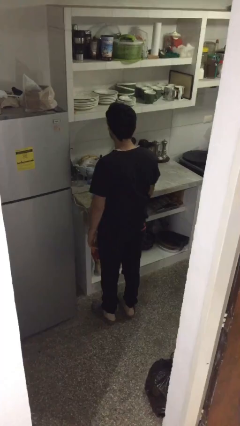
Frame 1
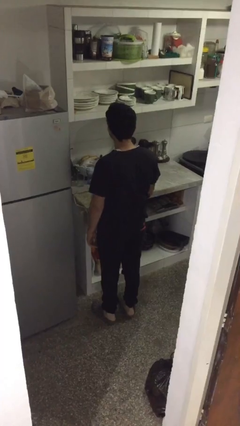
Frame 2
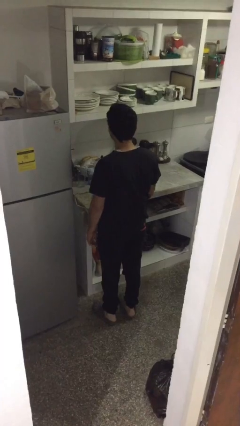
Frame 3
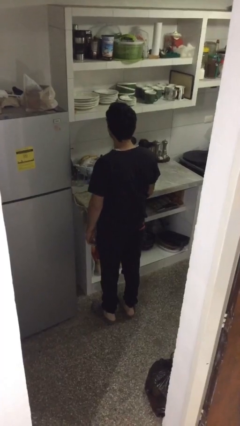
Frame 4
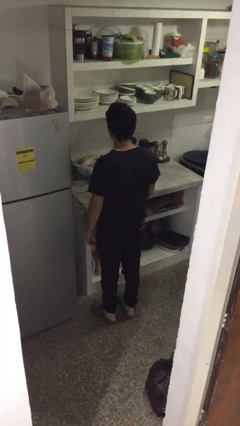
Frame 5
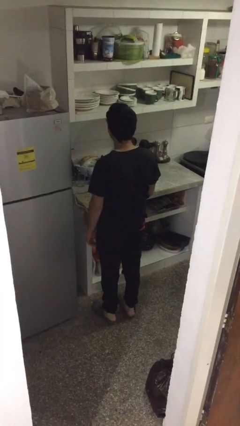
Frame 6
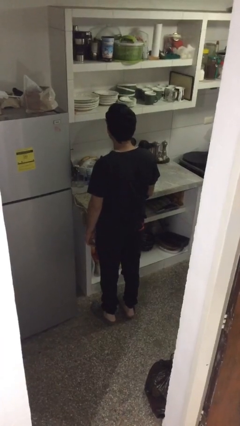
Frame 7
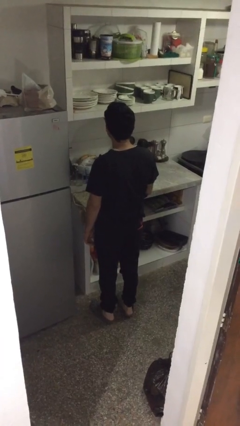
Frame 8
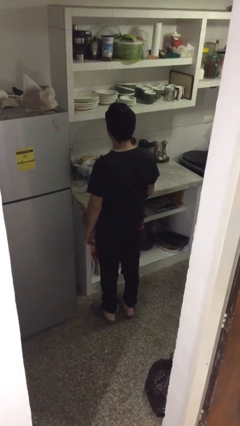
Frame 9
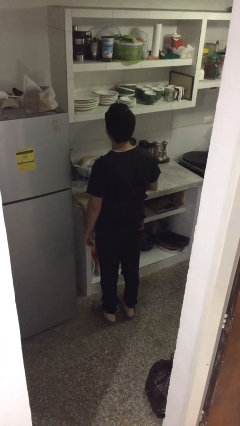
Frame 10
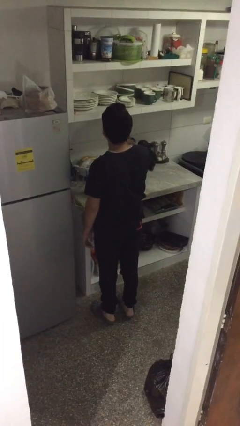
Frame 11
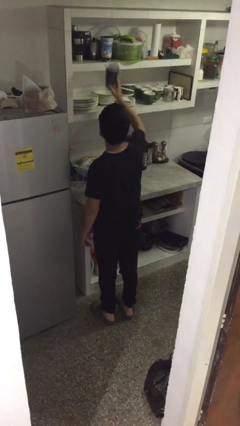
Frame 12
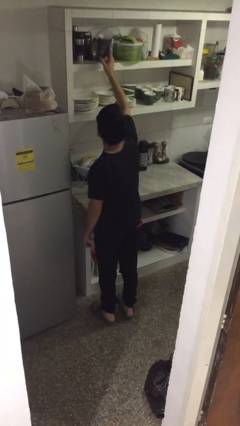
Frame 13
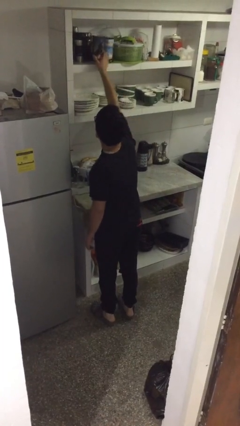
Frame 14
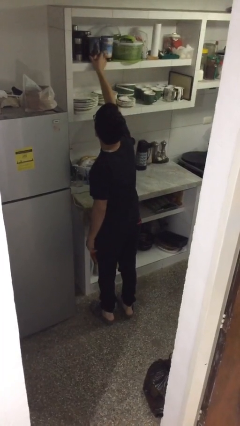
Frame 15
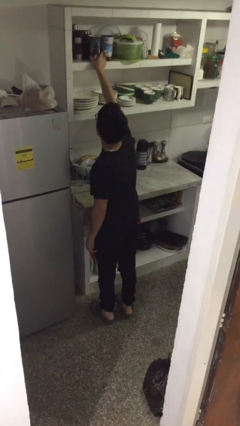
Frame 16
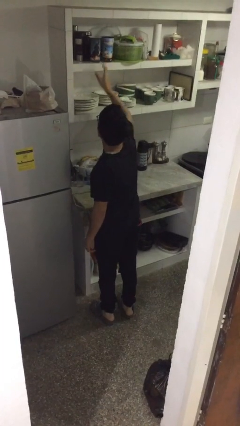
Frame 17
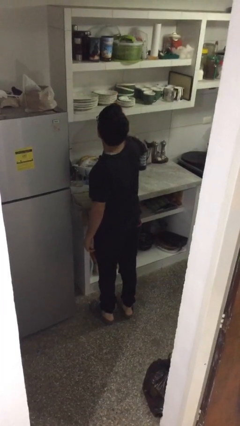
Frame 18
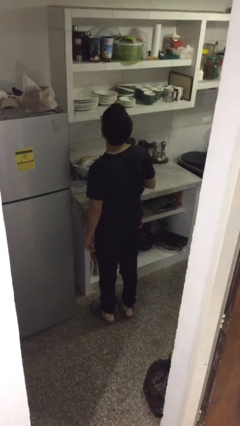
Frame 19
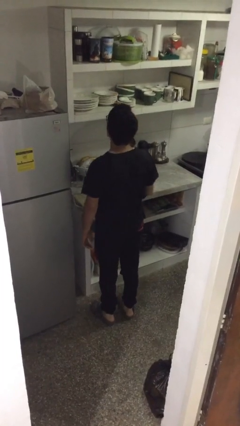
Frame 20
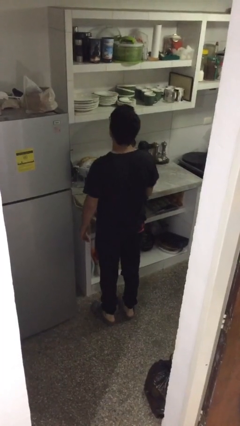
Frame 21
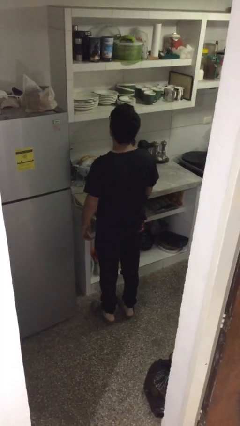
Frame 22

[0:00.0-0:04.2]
person puts down object on shelf

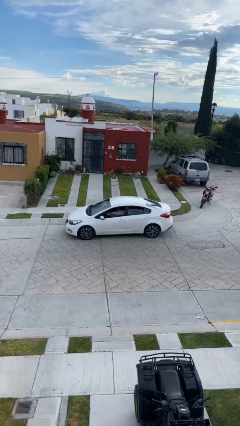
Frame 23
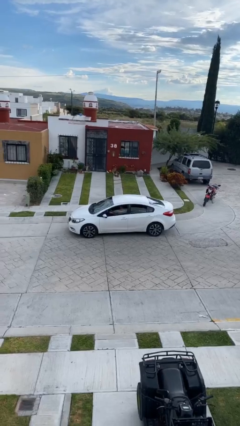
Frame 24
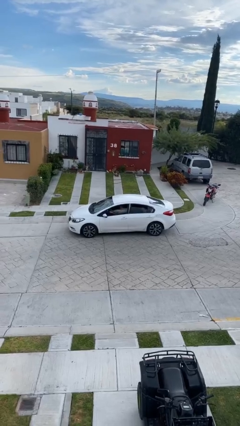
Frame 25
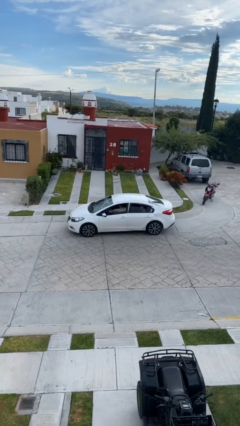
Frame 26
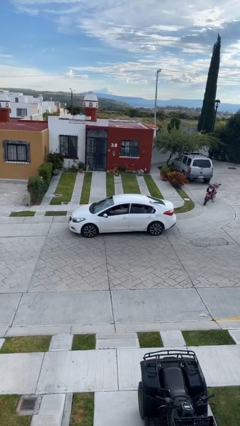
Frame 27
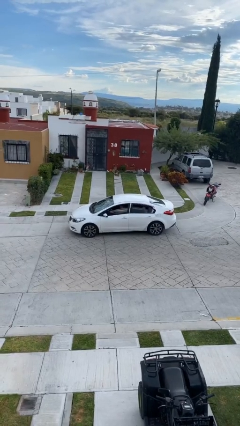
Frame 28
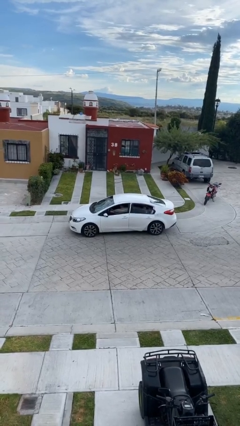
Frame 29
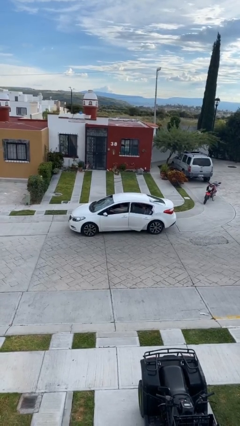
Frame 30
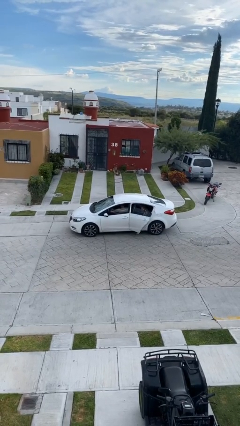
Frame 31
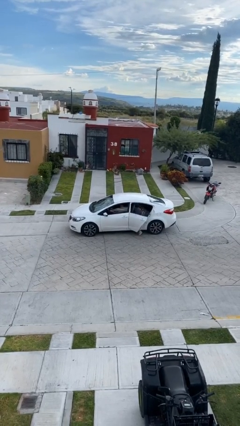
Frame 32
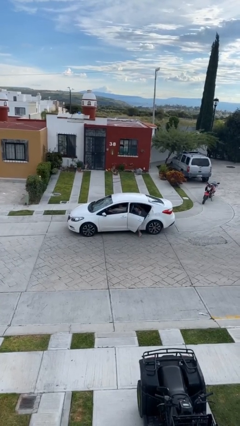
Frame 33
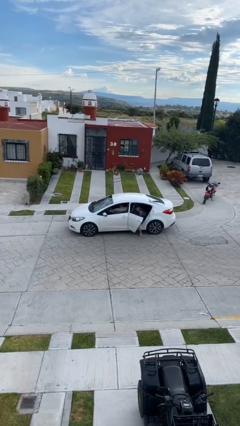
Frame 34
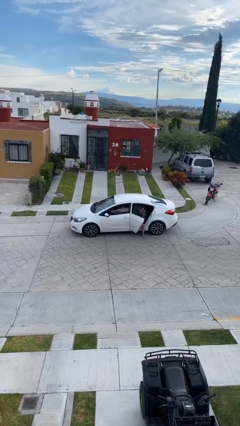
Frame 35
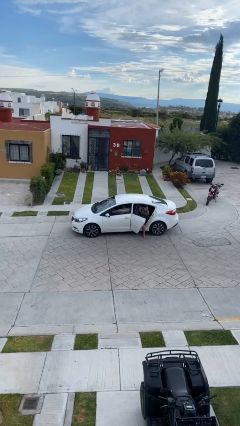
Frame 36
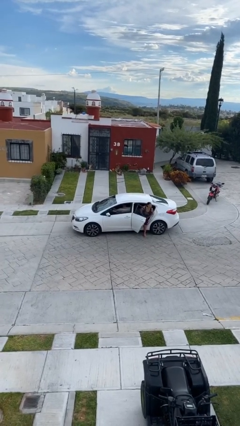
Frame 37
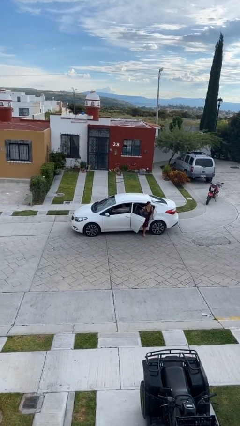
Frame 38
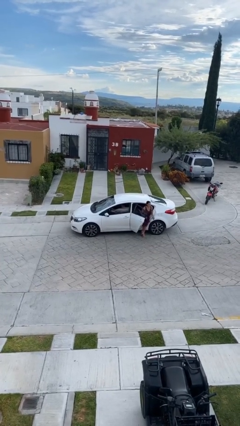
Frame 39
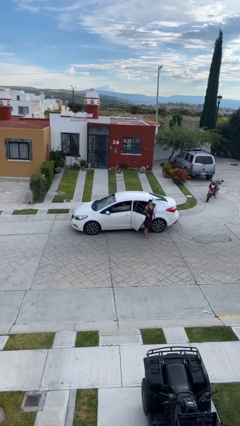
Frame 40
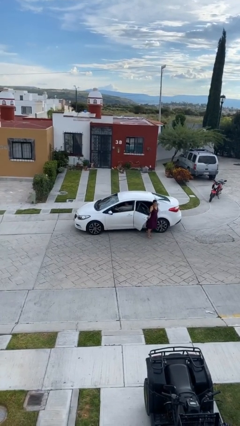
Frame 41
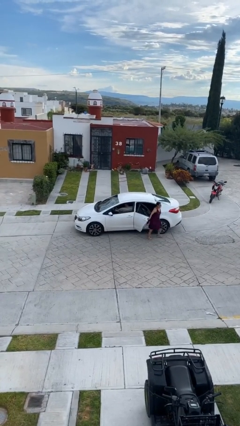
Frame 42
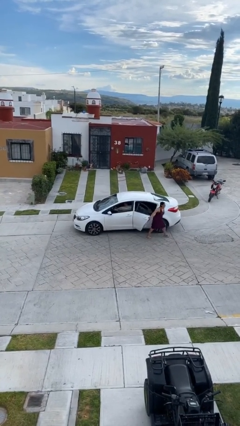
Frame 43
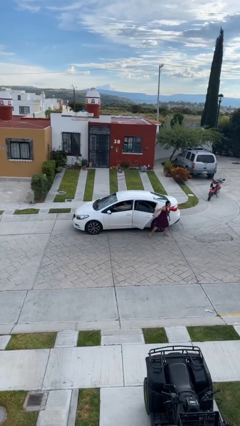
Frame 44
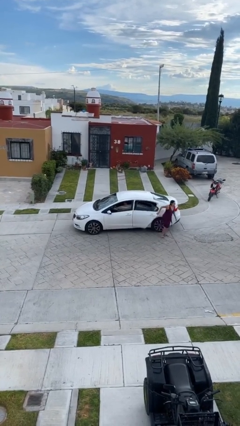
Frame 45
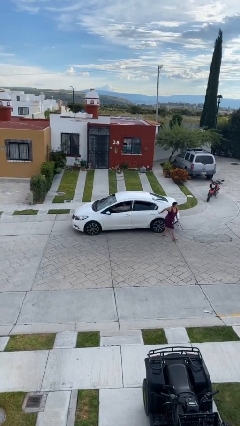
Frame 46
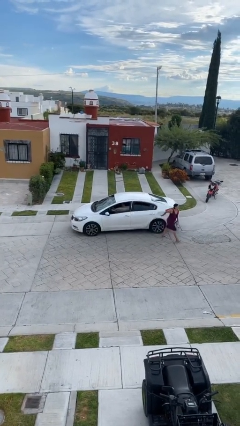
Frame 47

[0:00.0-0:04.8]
car drops off person

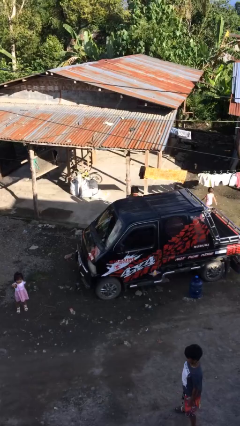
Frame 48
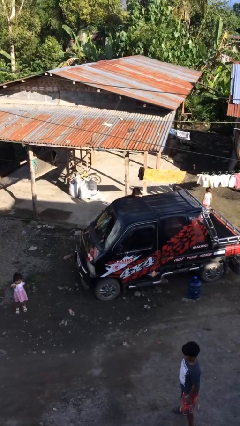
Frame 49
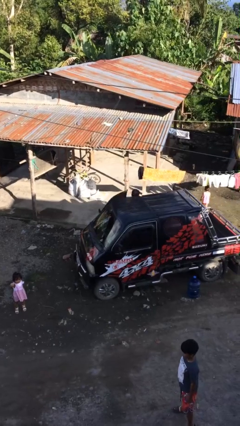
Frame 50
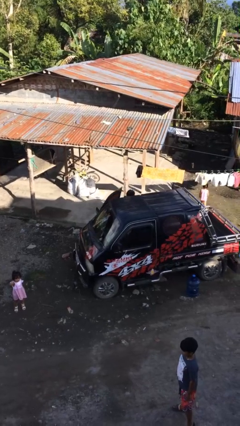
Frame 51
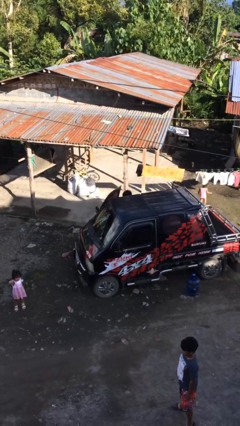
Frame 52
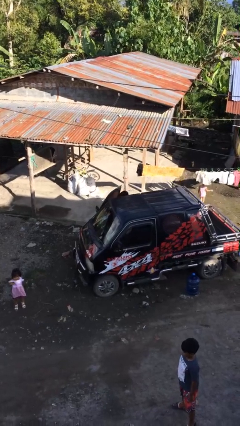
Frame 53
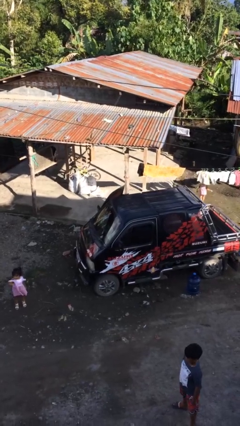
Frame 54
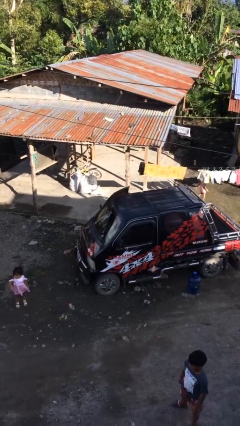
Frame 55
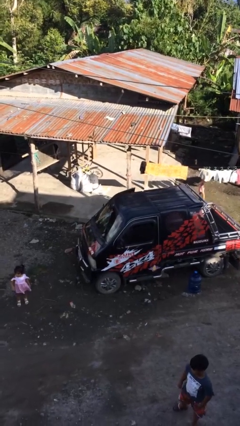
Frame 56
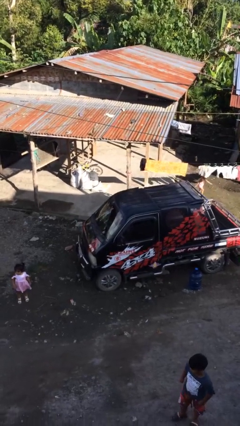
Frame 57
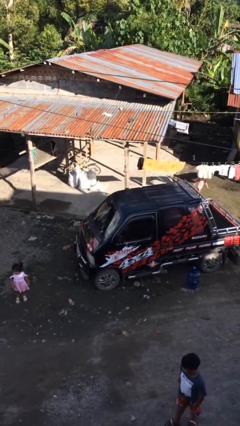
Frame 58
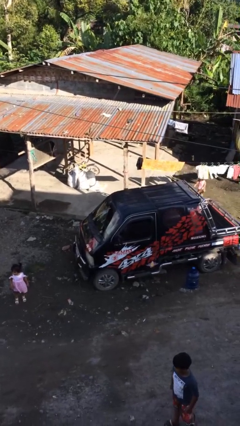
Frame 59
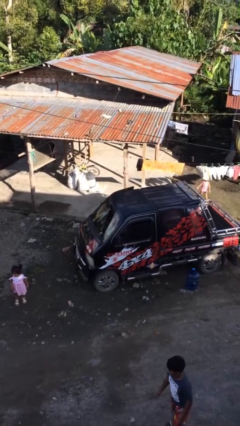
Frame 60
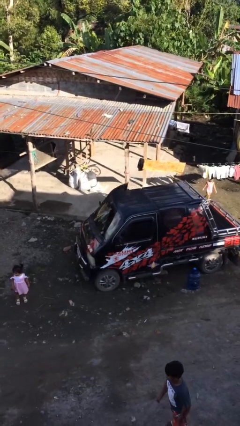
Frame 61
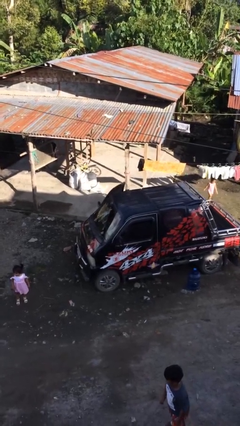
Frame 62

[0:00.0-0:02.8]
person enters car

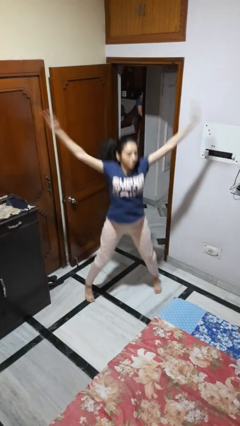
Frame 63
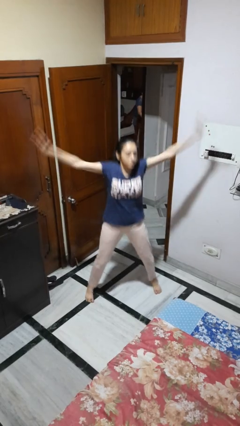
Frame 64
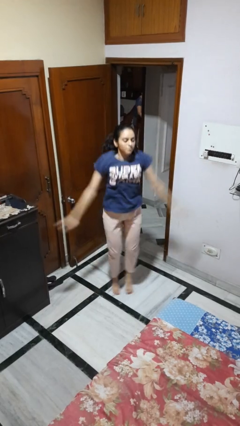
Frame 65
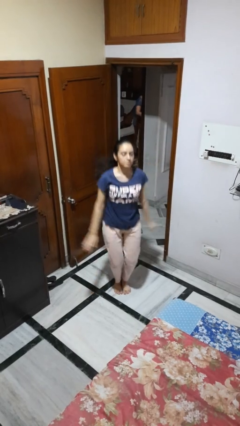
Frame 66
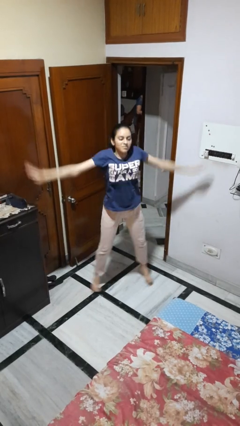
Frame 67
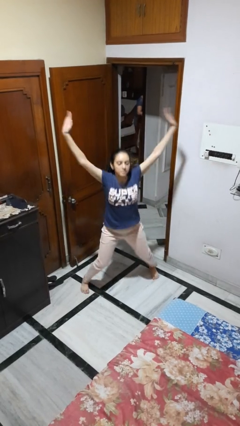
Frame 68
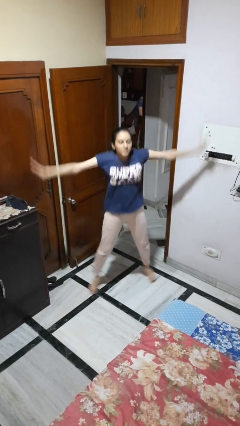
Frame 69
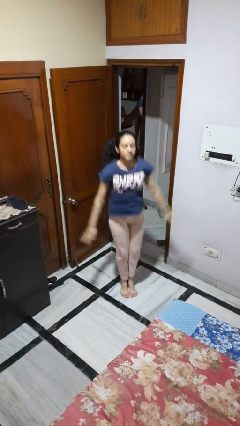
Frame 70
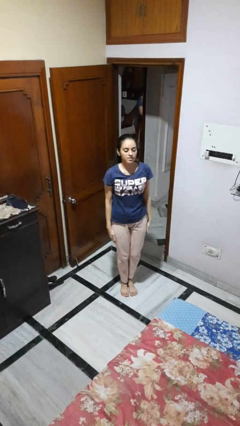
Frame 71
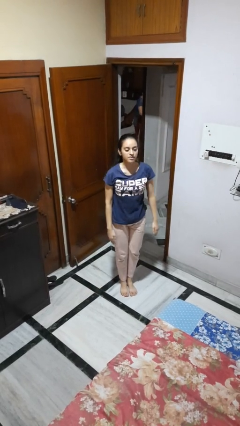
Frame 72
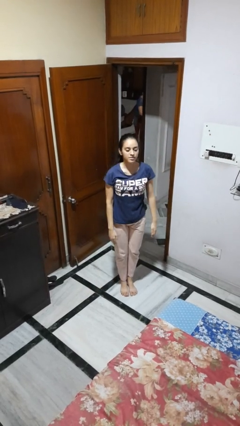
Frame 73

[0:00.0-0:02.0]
person exercises with jumping jacks

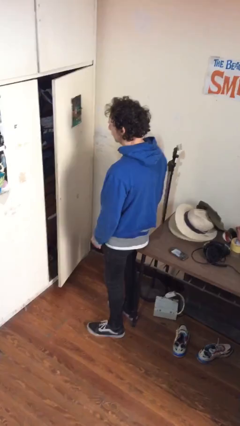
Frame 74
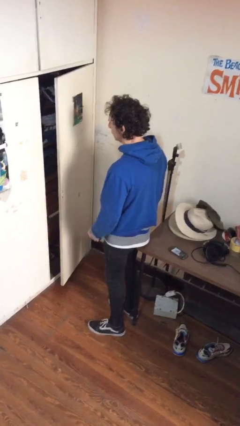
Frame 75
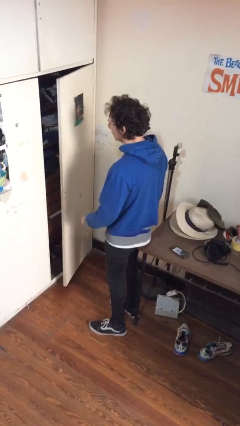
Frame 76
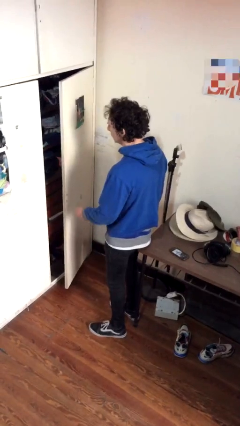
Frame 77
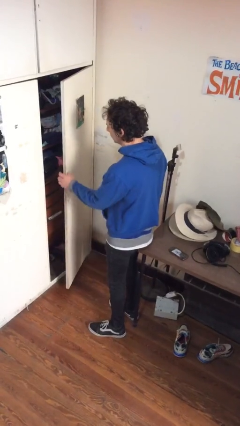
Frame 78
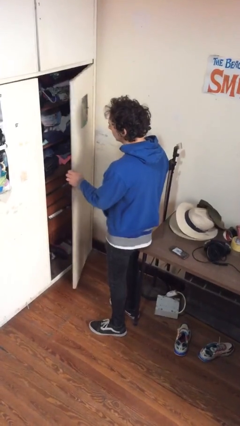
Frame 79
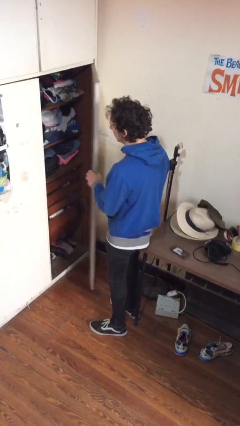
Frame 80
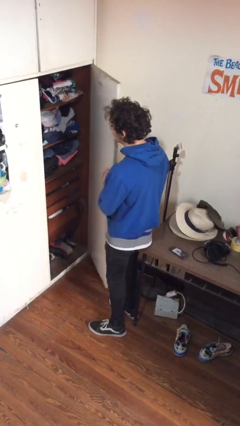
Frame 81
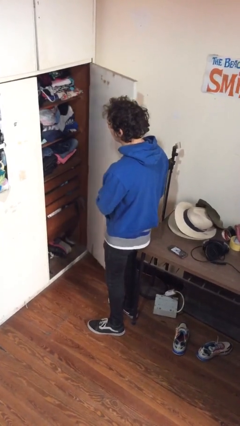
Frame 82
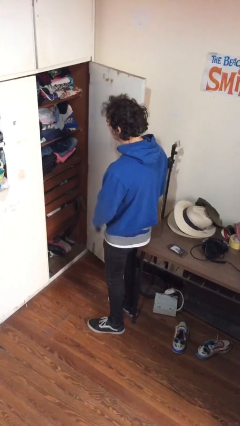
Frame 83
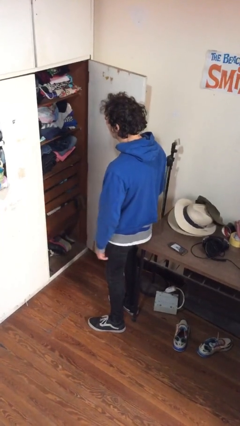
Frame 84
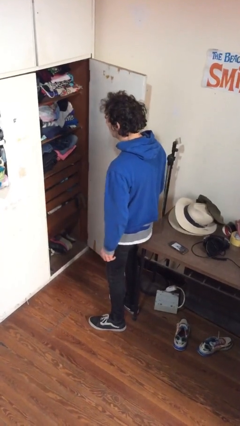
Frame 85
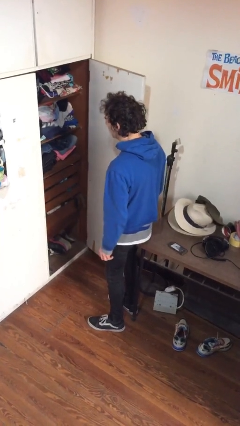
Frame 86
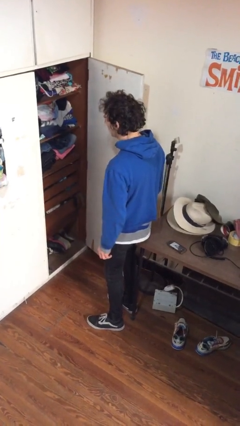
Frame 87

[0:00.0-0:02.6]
person opens closet door

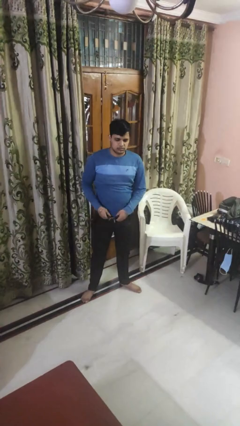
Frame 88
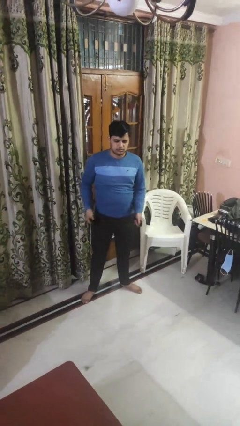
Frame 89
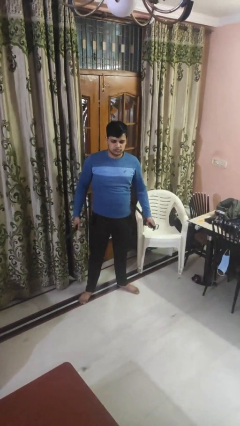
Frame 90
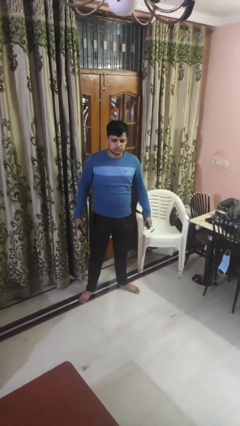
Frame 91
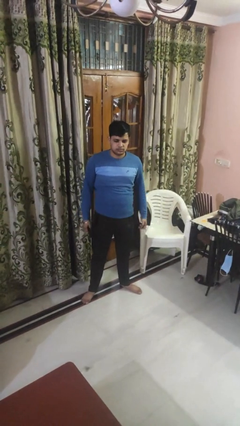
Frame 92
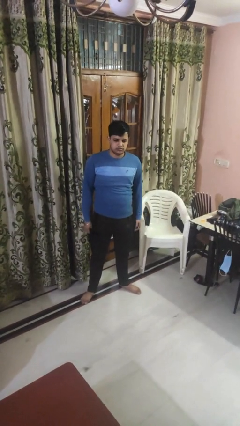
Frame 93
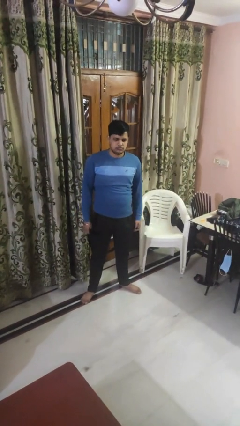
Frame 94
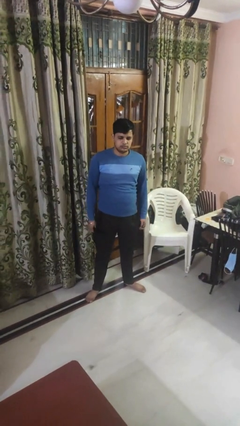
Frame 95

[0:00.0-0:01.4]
person takes off belt
